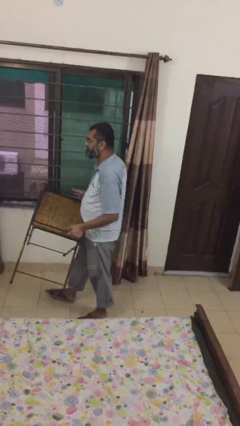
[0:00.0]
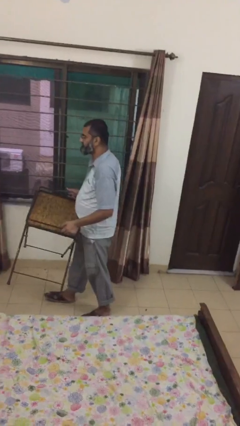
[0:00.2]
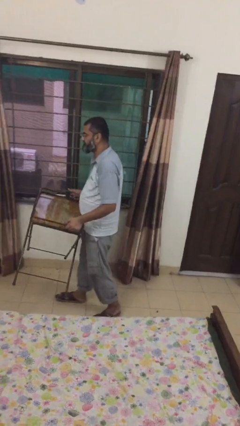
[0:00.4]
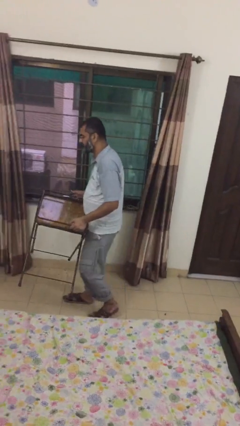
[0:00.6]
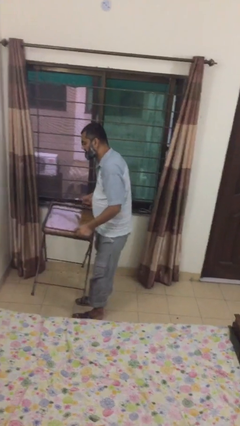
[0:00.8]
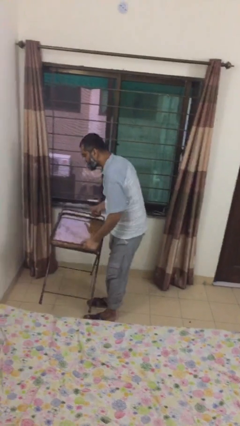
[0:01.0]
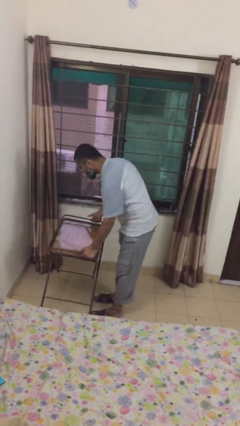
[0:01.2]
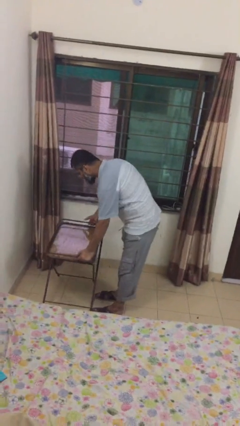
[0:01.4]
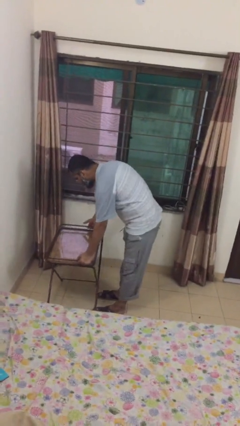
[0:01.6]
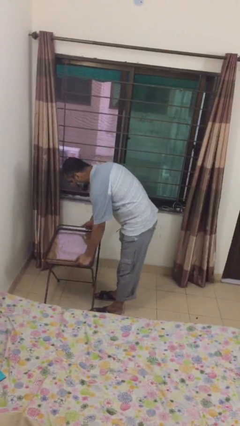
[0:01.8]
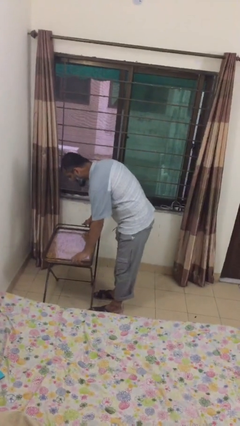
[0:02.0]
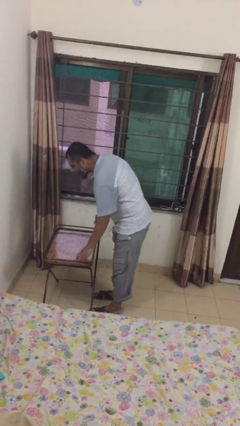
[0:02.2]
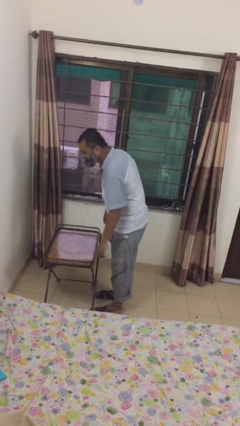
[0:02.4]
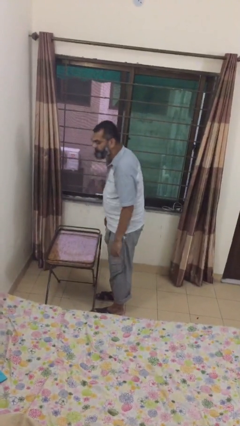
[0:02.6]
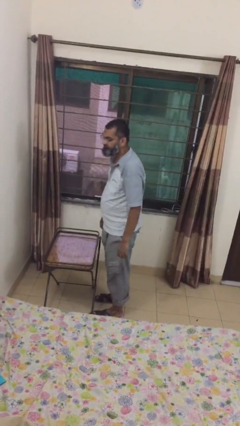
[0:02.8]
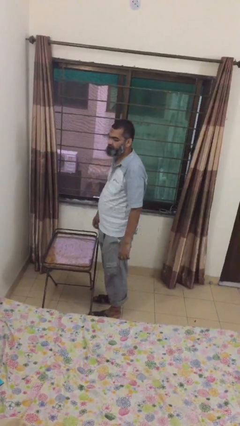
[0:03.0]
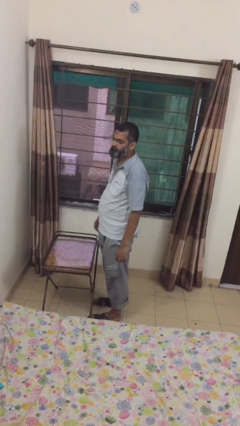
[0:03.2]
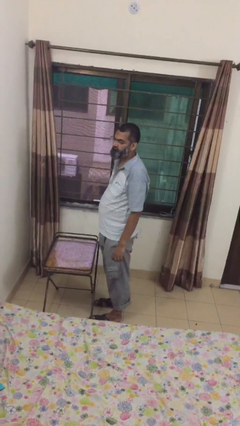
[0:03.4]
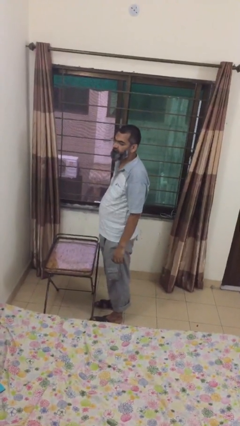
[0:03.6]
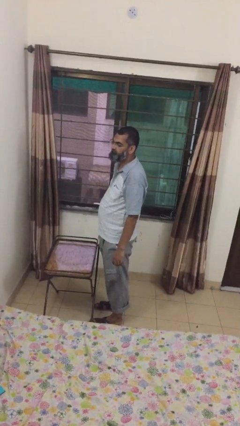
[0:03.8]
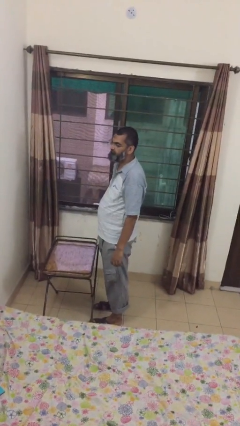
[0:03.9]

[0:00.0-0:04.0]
person puts down object on floor

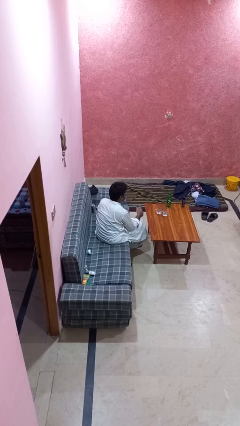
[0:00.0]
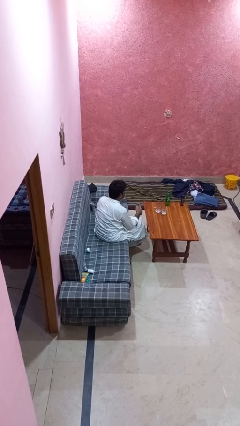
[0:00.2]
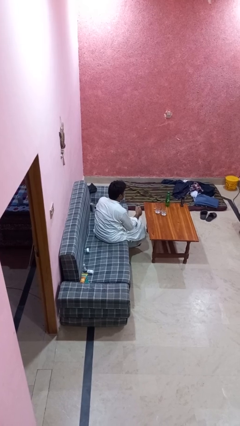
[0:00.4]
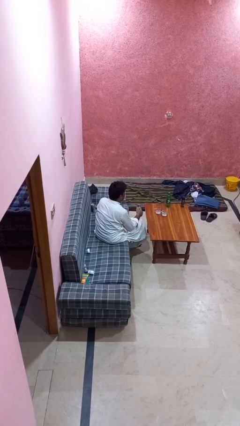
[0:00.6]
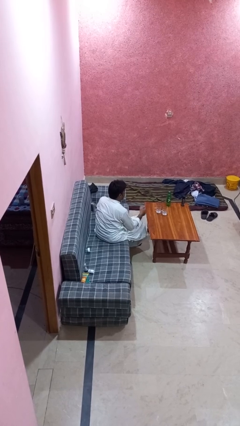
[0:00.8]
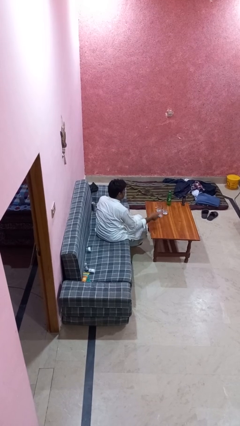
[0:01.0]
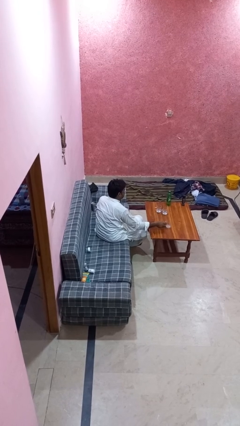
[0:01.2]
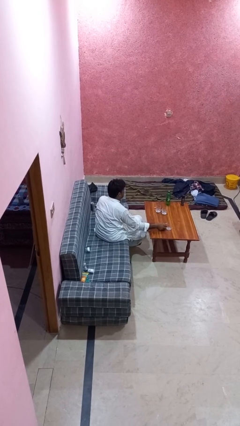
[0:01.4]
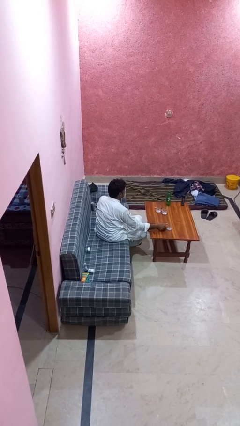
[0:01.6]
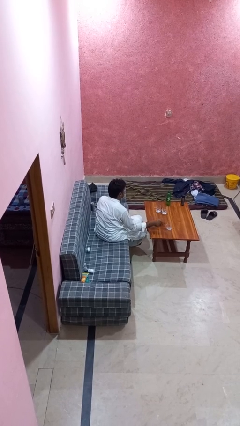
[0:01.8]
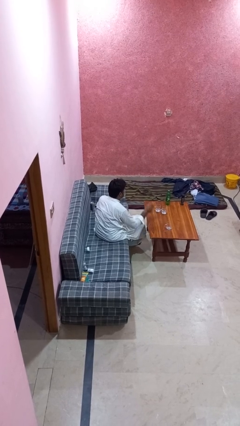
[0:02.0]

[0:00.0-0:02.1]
person puts down object on table

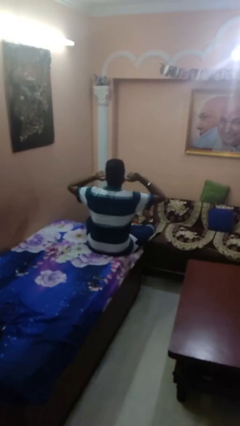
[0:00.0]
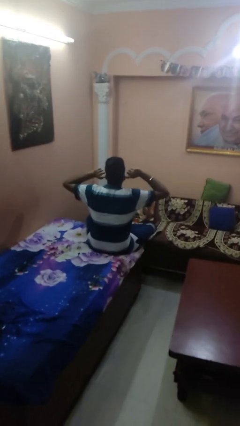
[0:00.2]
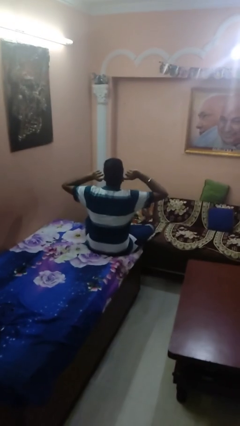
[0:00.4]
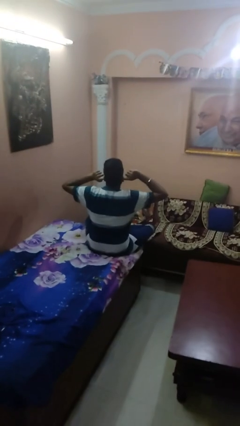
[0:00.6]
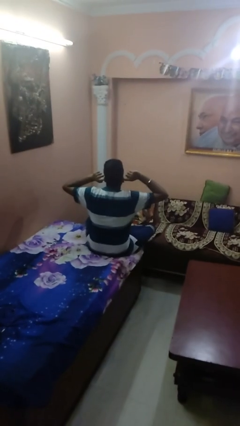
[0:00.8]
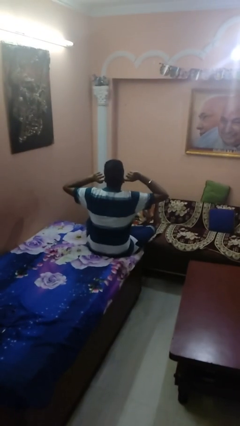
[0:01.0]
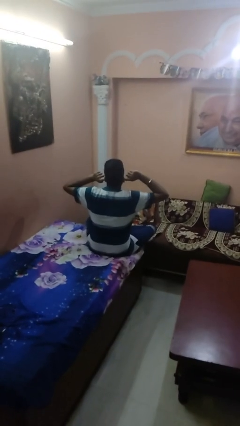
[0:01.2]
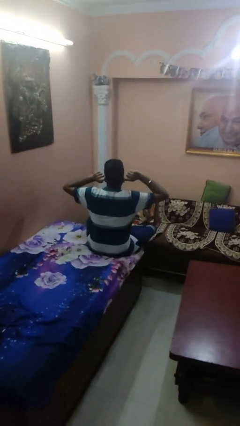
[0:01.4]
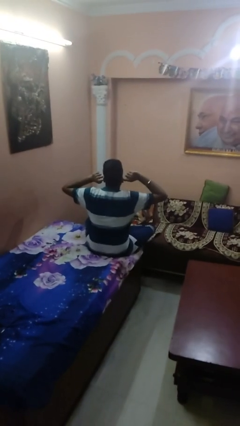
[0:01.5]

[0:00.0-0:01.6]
person puts fingers in ear

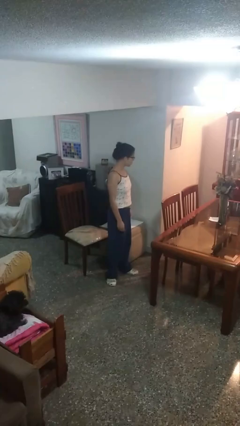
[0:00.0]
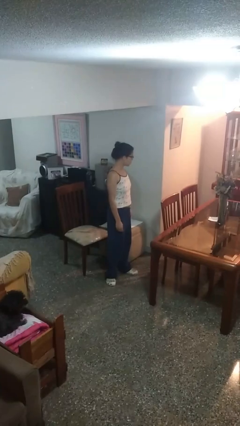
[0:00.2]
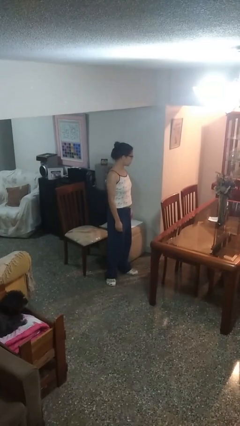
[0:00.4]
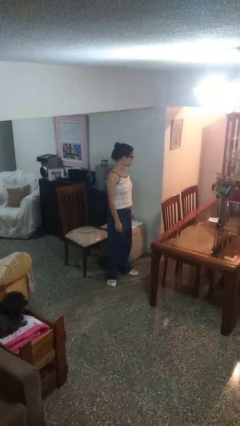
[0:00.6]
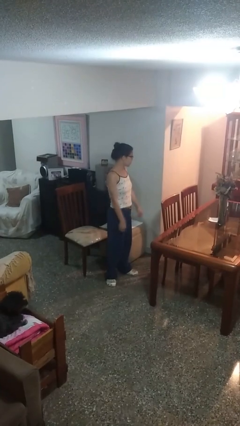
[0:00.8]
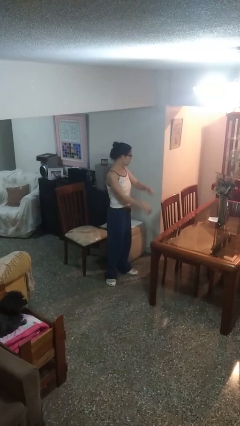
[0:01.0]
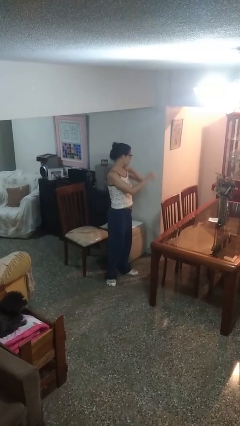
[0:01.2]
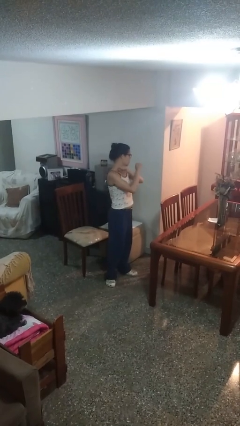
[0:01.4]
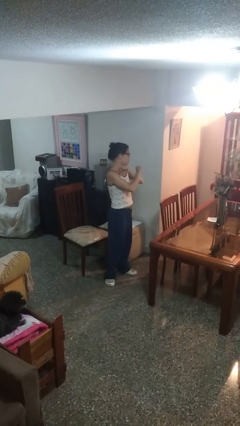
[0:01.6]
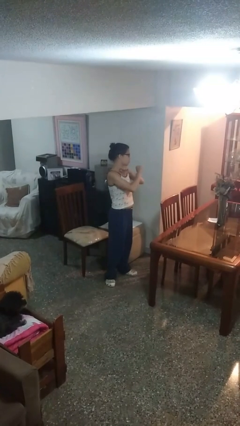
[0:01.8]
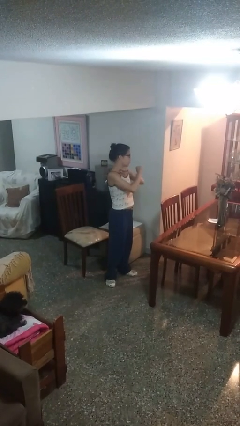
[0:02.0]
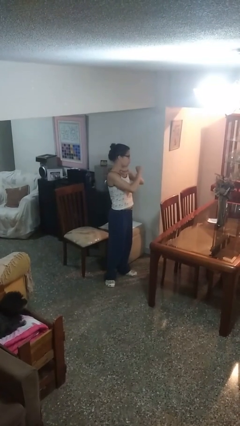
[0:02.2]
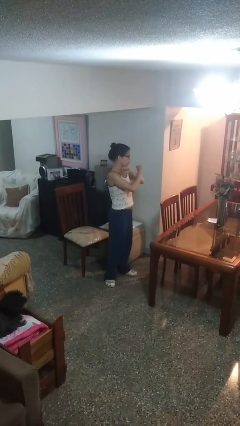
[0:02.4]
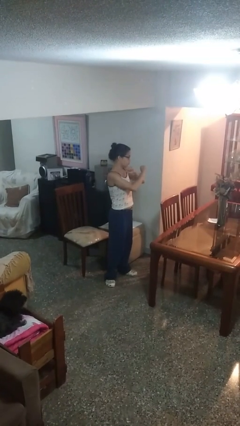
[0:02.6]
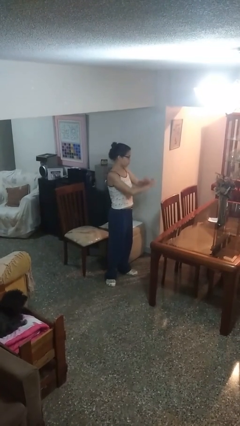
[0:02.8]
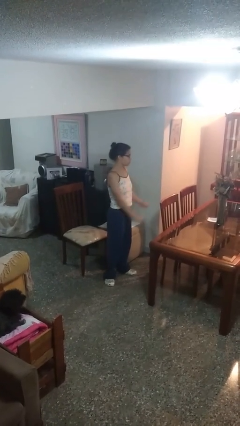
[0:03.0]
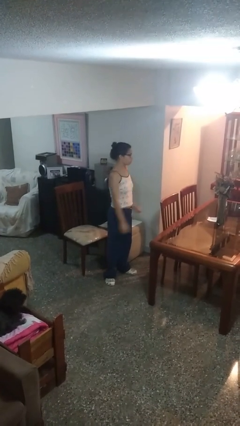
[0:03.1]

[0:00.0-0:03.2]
person gestures arms x

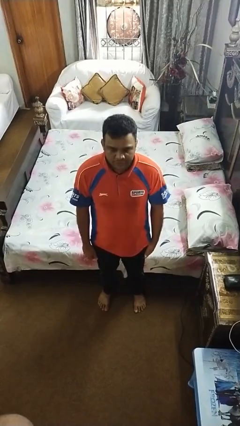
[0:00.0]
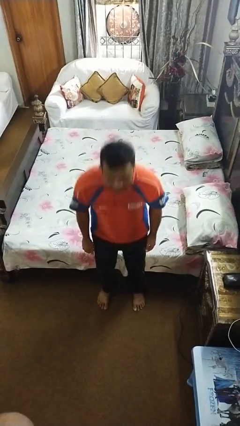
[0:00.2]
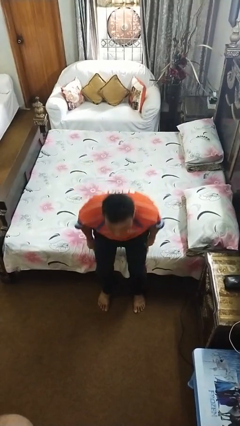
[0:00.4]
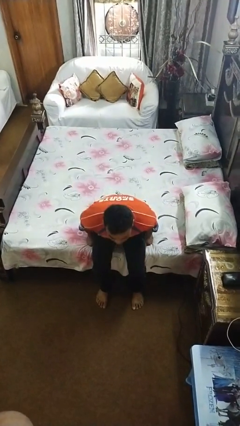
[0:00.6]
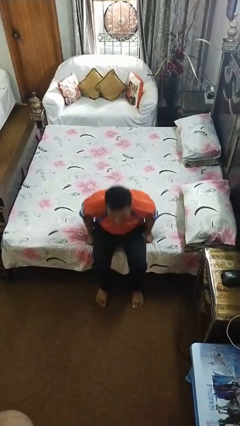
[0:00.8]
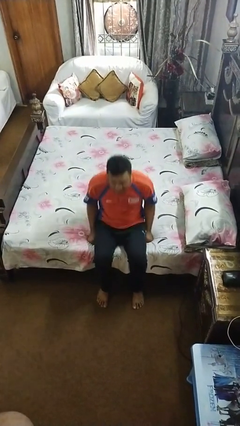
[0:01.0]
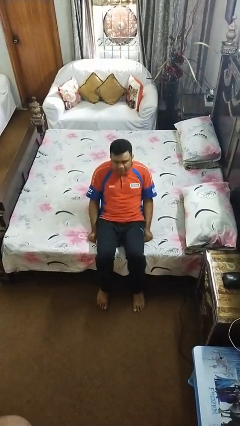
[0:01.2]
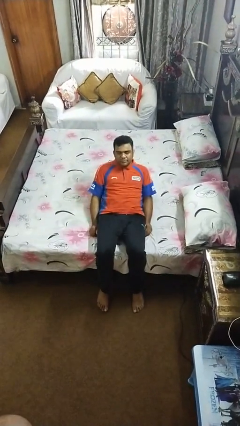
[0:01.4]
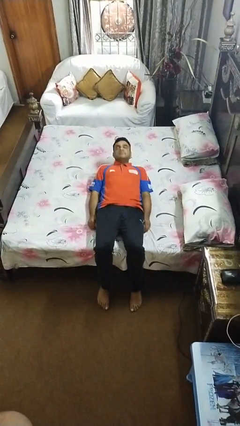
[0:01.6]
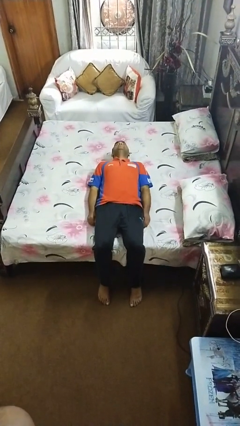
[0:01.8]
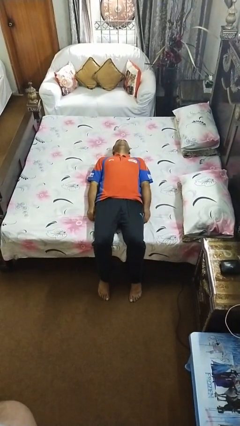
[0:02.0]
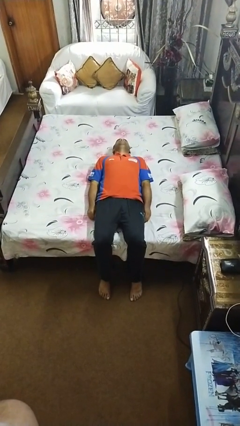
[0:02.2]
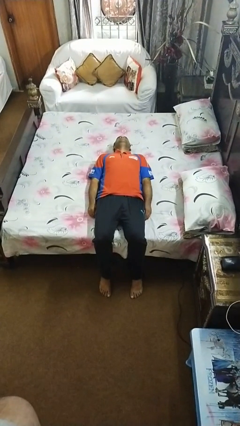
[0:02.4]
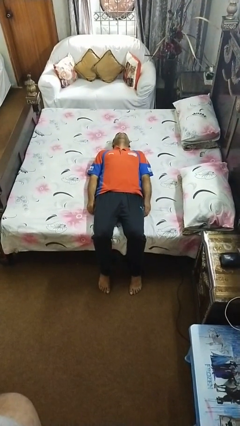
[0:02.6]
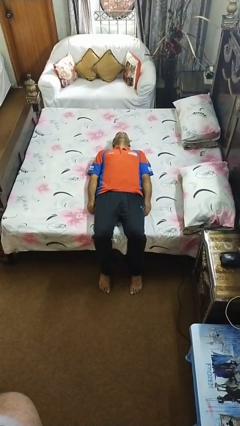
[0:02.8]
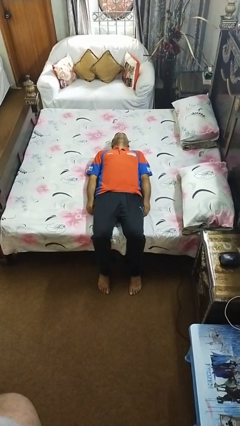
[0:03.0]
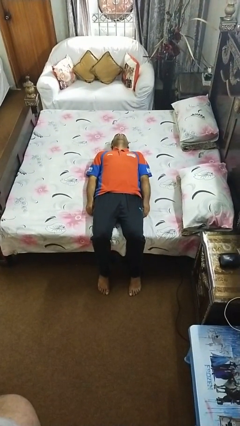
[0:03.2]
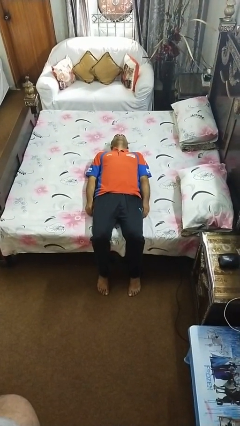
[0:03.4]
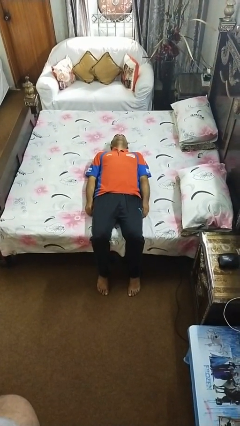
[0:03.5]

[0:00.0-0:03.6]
person lies down on bed

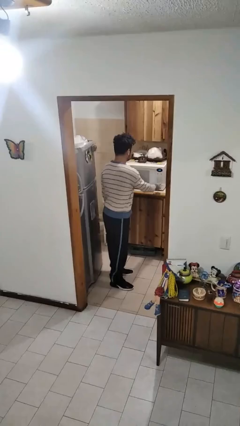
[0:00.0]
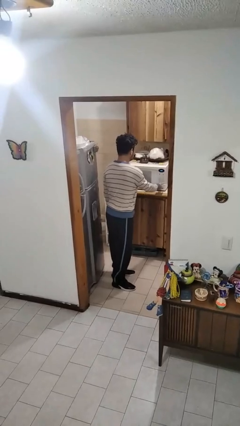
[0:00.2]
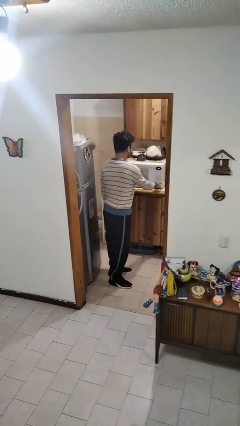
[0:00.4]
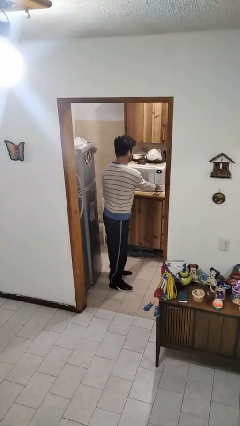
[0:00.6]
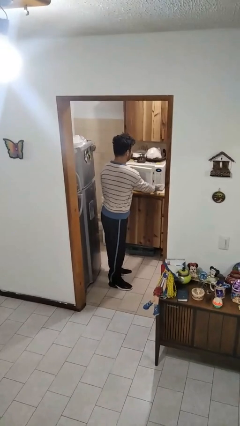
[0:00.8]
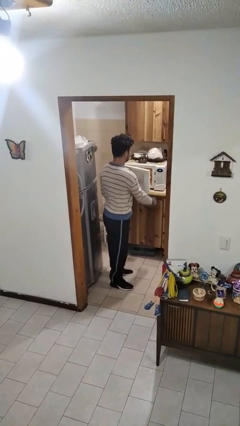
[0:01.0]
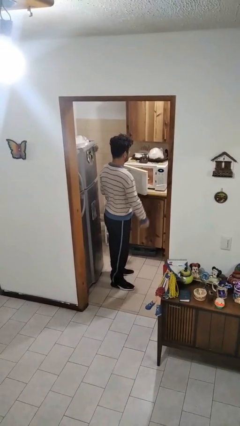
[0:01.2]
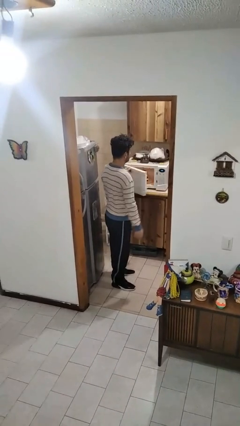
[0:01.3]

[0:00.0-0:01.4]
person opens microwave

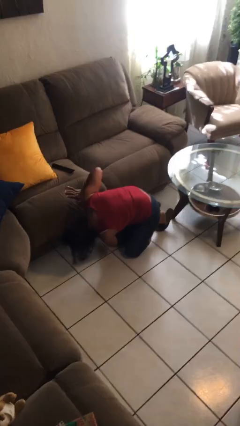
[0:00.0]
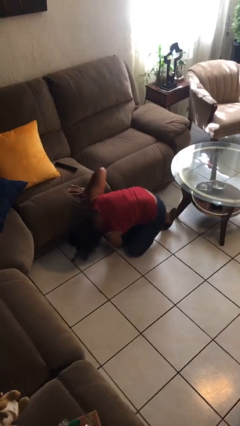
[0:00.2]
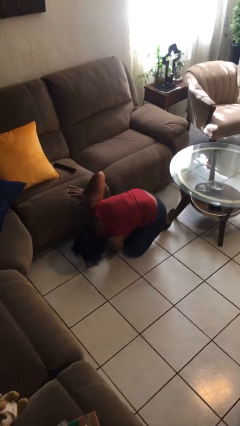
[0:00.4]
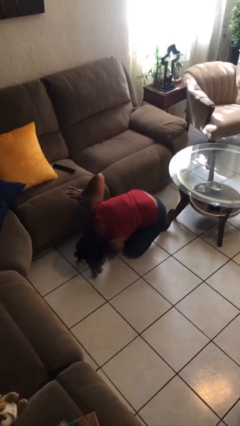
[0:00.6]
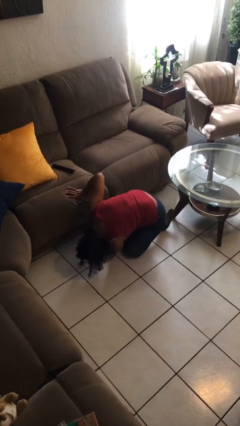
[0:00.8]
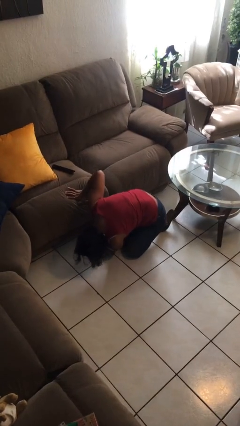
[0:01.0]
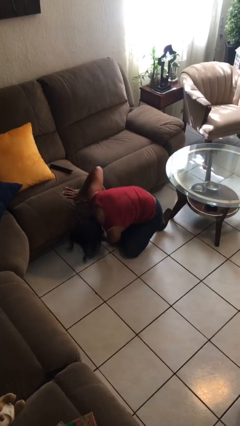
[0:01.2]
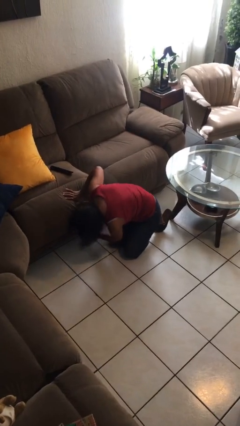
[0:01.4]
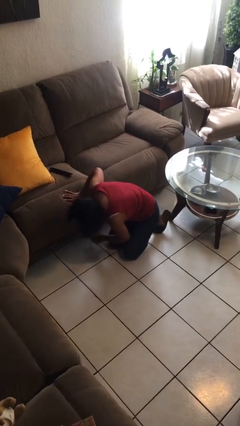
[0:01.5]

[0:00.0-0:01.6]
person searches under couch
